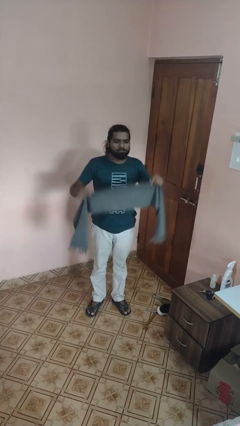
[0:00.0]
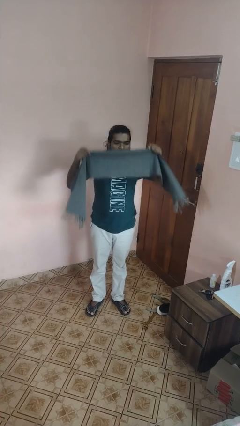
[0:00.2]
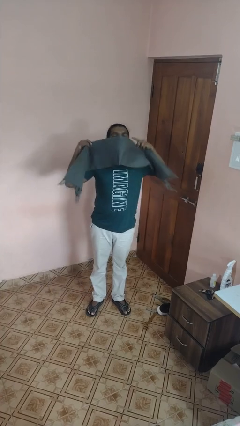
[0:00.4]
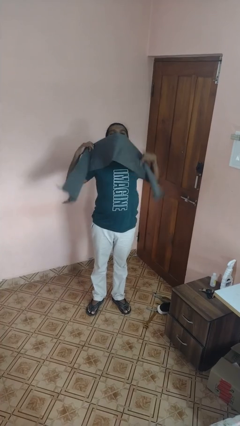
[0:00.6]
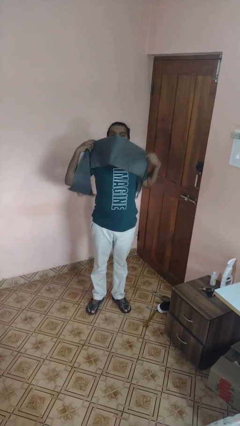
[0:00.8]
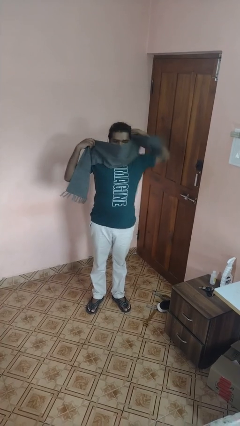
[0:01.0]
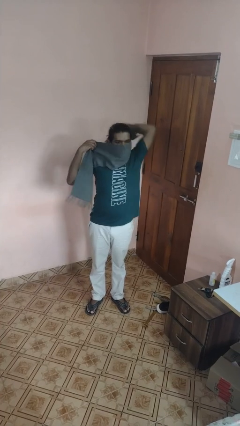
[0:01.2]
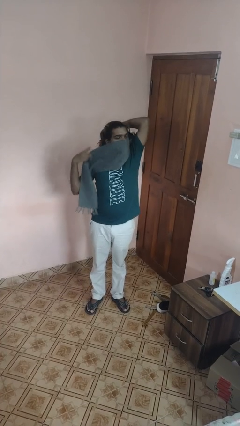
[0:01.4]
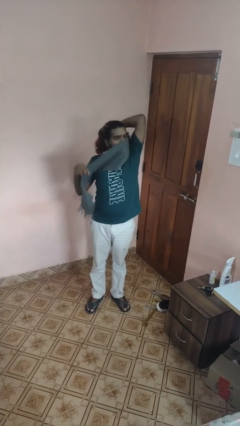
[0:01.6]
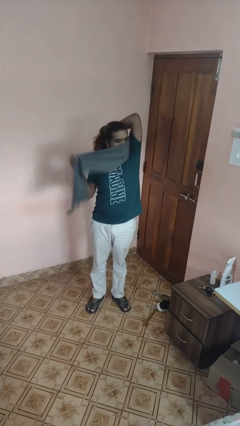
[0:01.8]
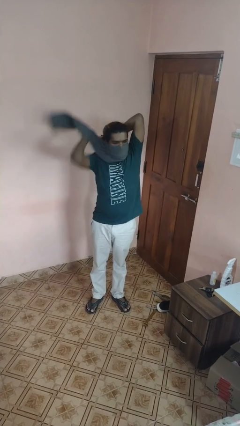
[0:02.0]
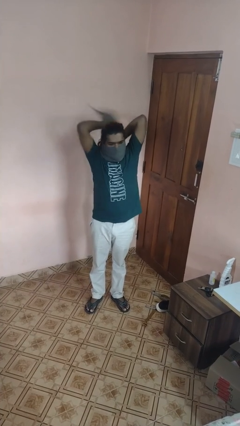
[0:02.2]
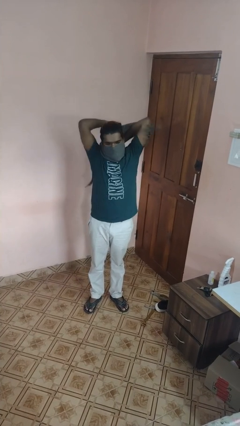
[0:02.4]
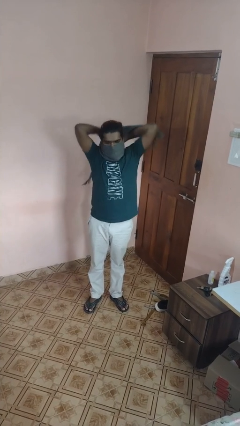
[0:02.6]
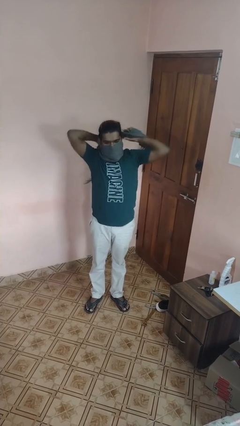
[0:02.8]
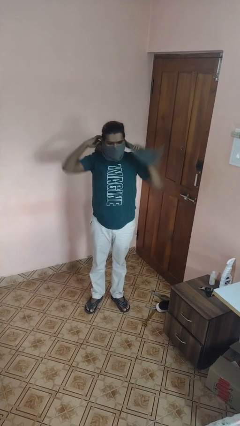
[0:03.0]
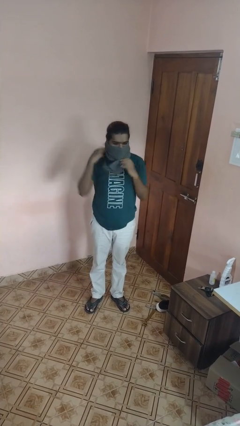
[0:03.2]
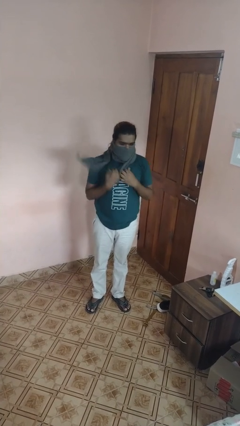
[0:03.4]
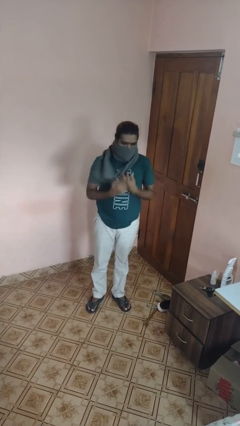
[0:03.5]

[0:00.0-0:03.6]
person puts on scarf

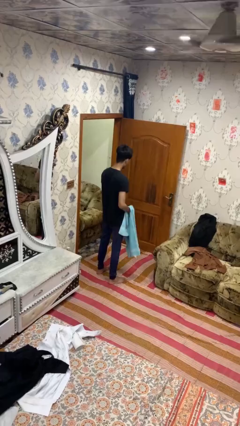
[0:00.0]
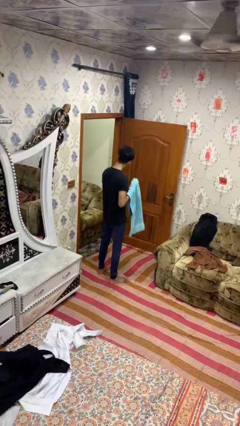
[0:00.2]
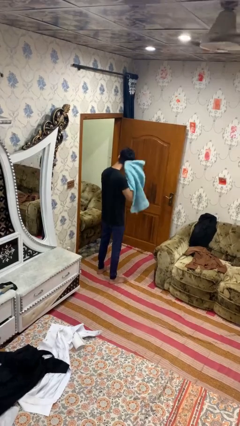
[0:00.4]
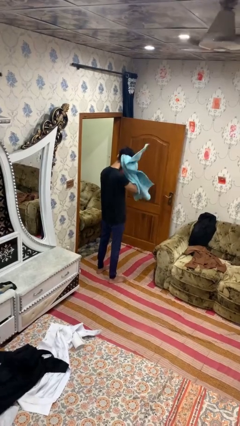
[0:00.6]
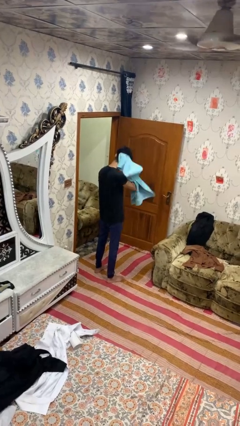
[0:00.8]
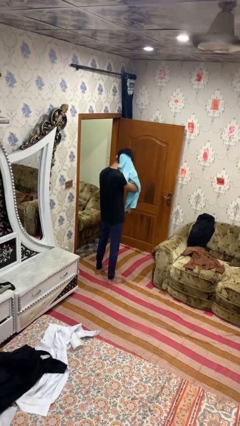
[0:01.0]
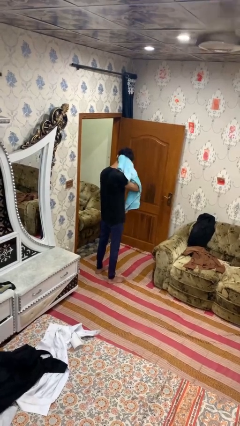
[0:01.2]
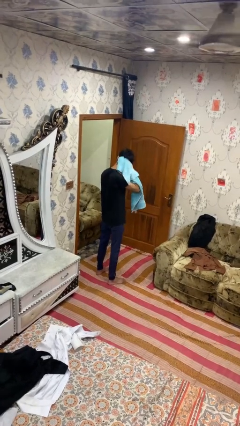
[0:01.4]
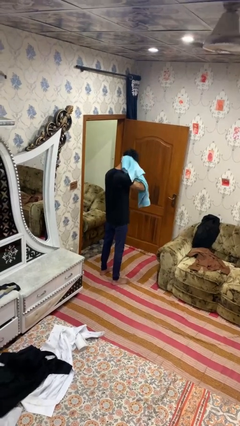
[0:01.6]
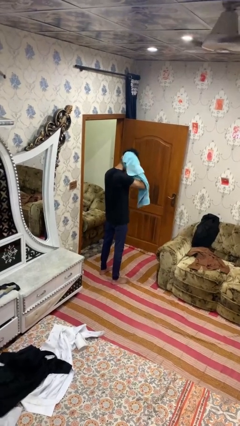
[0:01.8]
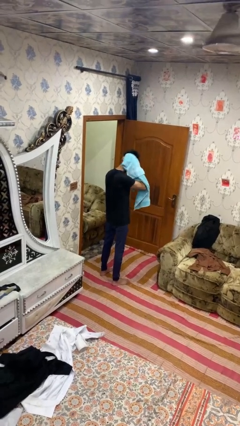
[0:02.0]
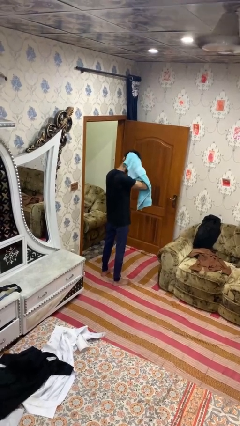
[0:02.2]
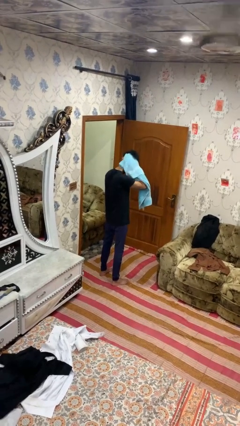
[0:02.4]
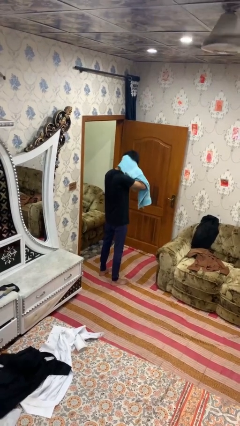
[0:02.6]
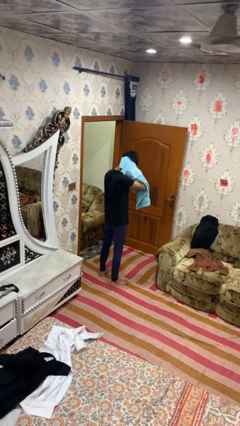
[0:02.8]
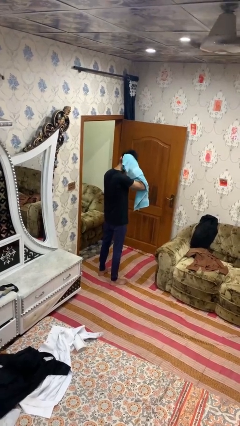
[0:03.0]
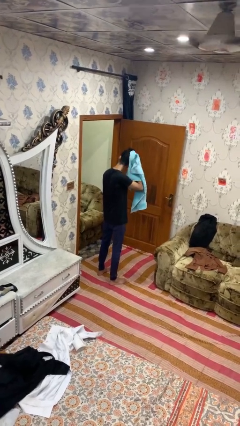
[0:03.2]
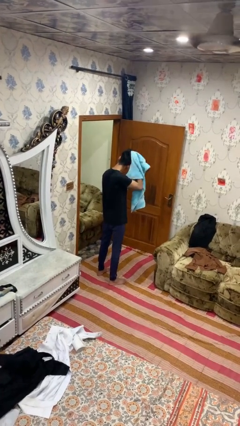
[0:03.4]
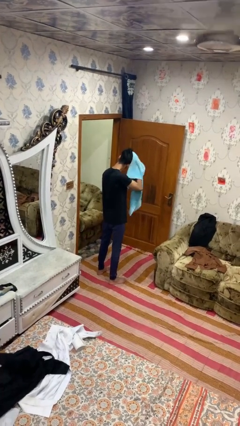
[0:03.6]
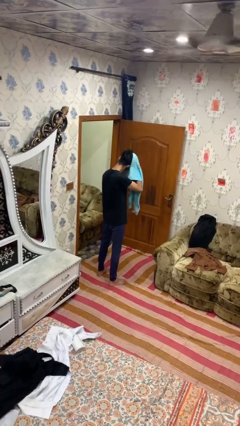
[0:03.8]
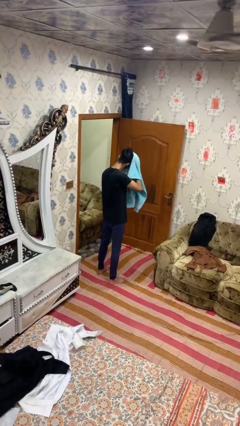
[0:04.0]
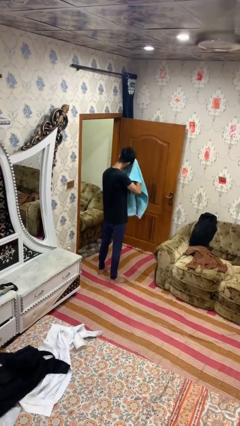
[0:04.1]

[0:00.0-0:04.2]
person dries hair with towel

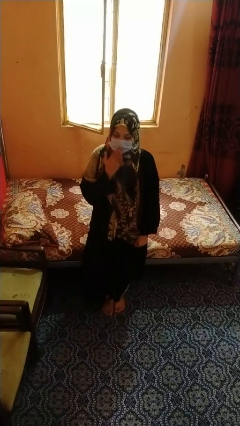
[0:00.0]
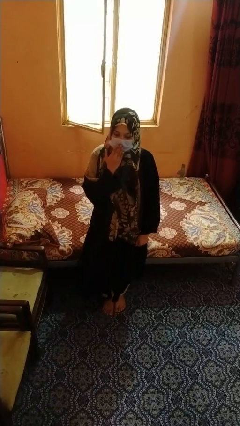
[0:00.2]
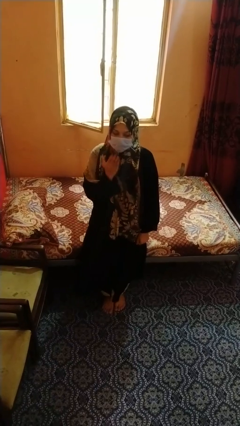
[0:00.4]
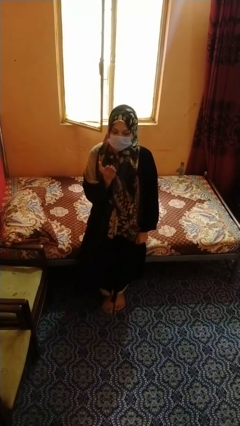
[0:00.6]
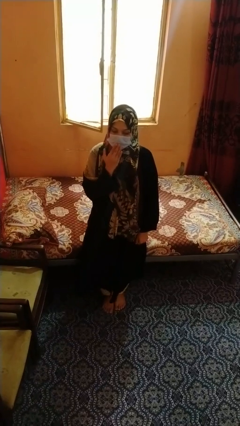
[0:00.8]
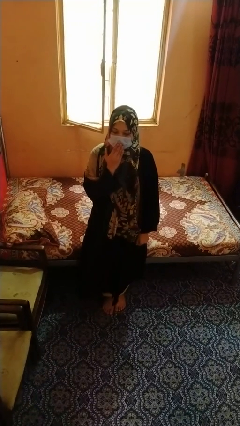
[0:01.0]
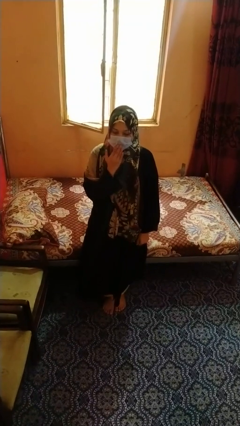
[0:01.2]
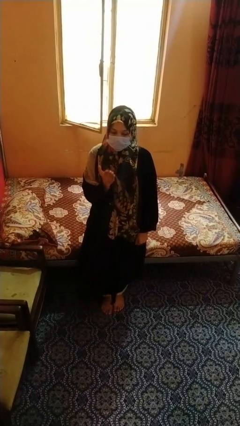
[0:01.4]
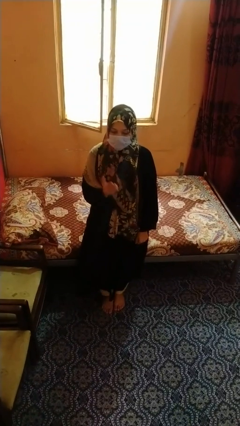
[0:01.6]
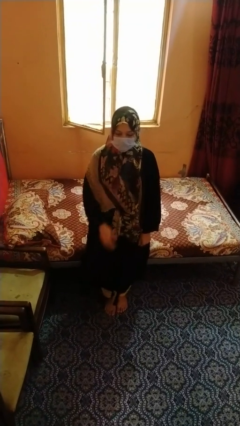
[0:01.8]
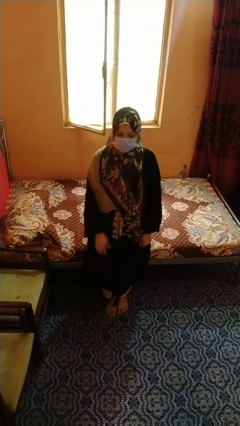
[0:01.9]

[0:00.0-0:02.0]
person gestures blow kiss

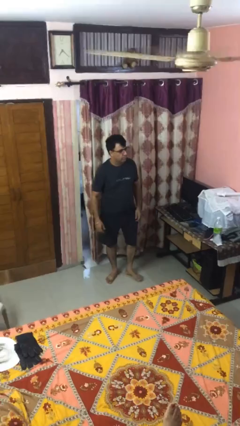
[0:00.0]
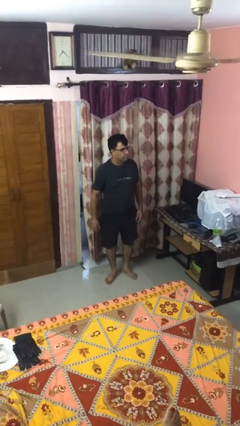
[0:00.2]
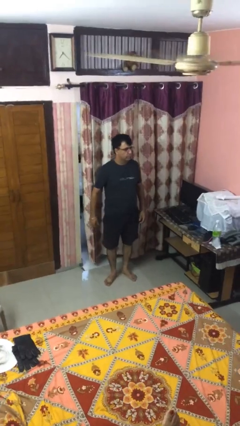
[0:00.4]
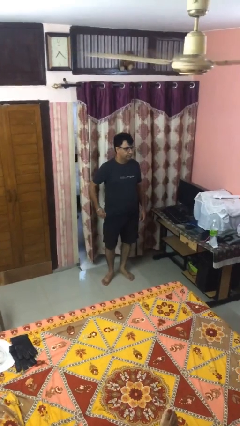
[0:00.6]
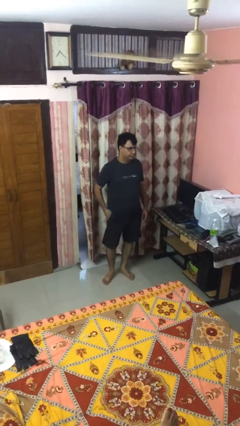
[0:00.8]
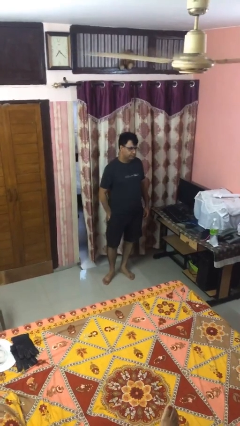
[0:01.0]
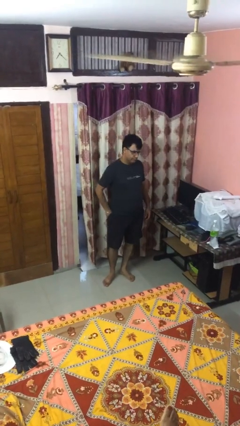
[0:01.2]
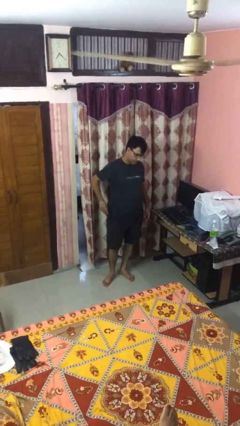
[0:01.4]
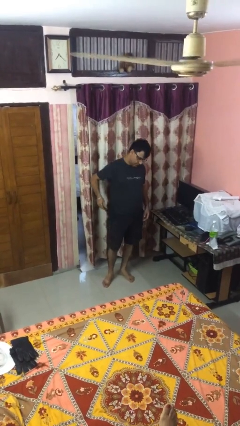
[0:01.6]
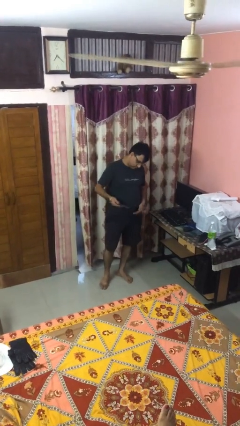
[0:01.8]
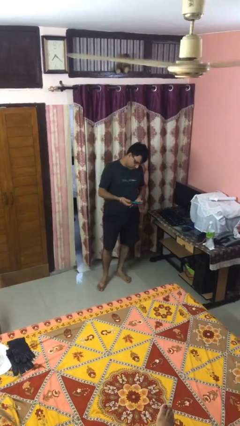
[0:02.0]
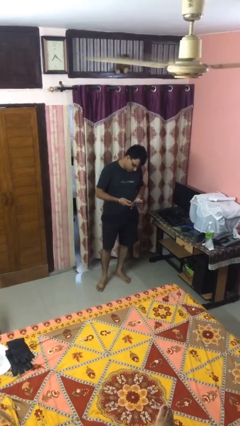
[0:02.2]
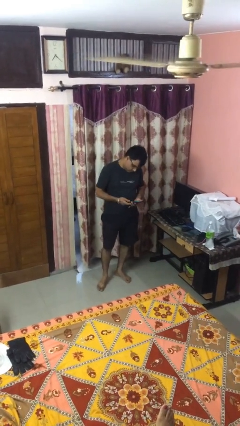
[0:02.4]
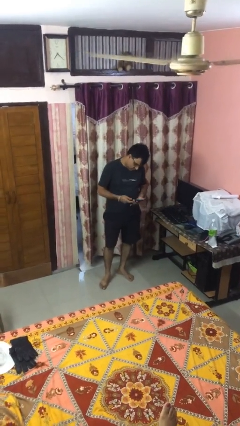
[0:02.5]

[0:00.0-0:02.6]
person takes phone from pocket

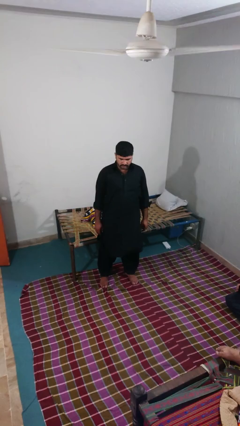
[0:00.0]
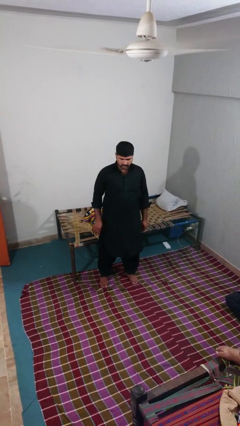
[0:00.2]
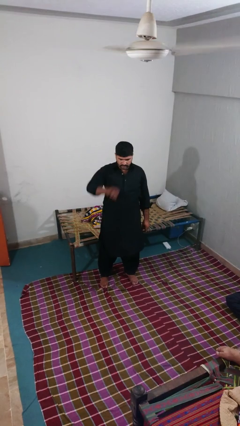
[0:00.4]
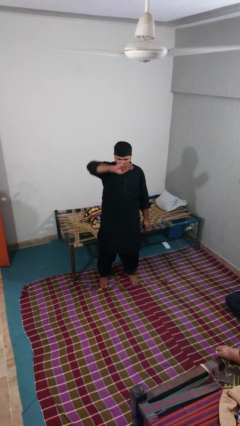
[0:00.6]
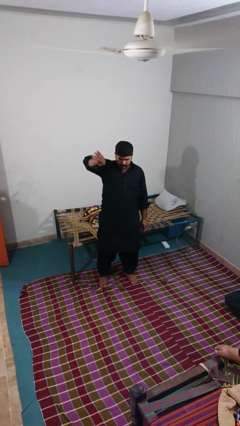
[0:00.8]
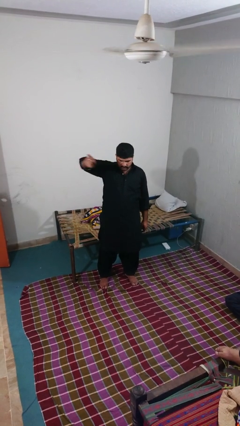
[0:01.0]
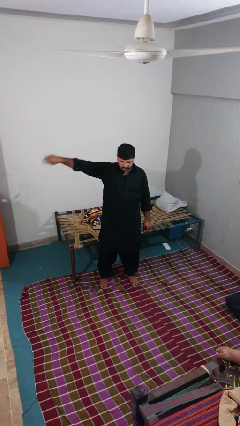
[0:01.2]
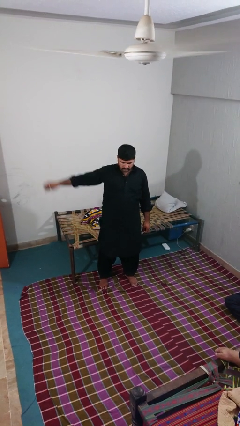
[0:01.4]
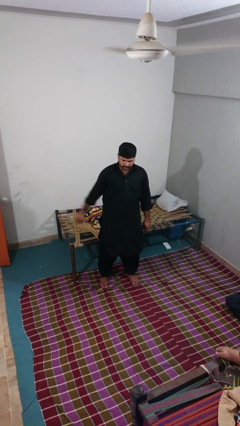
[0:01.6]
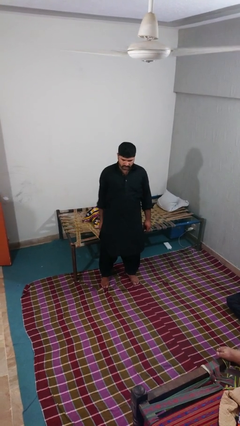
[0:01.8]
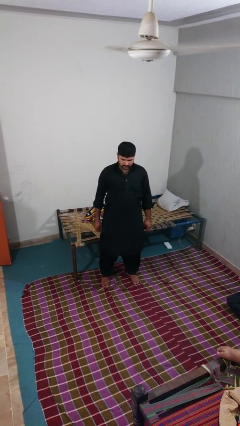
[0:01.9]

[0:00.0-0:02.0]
person gestures swipe right

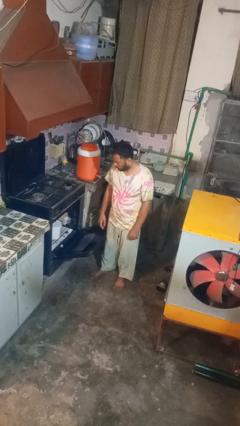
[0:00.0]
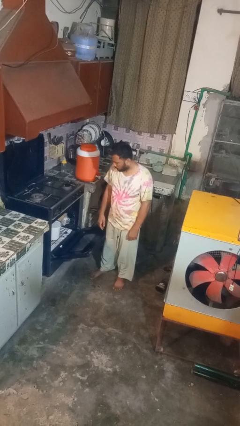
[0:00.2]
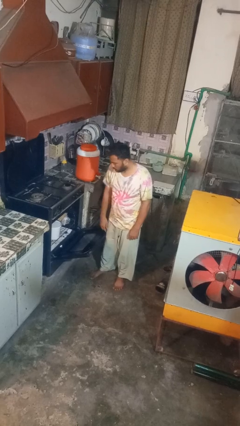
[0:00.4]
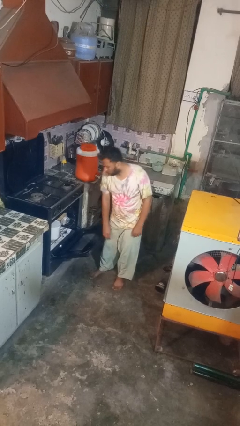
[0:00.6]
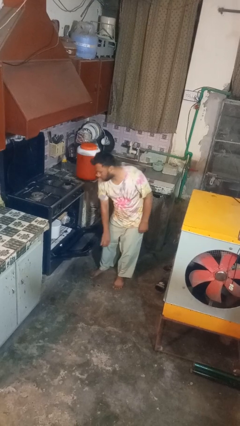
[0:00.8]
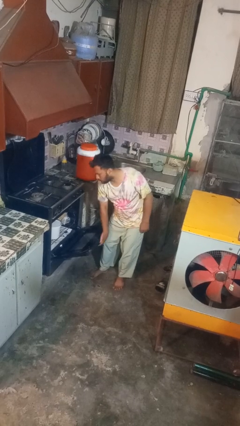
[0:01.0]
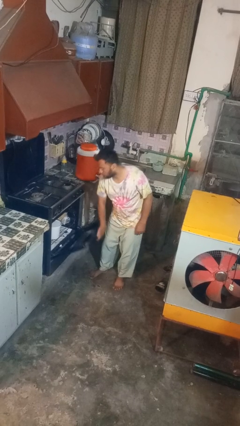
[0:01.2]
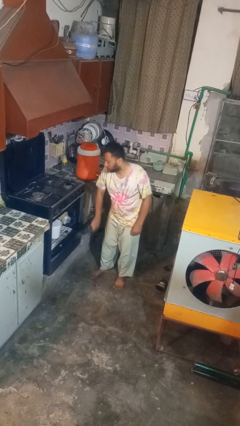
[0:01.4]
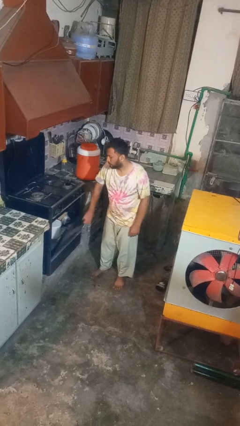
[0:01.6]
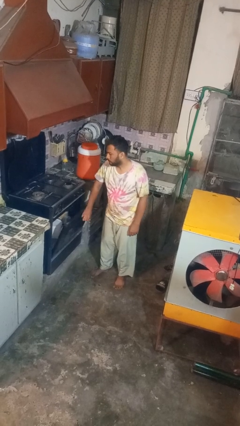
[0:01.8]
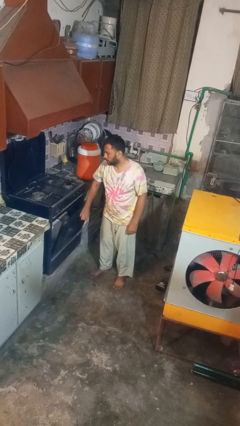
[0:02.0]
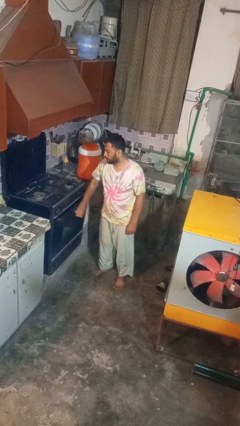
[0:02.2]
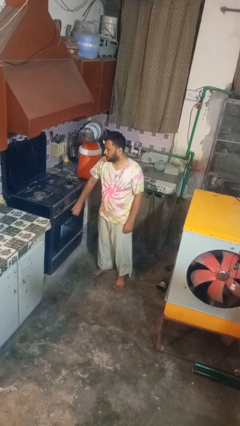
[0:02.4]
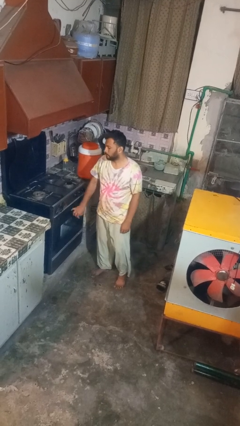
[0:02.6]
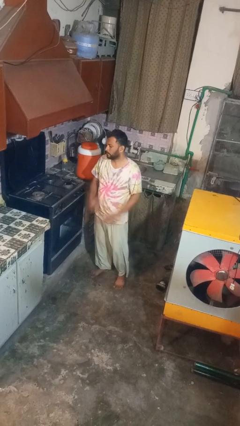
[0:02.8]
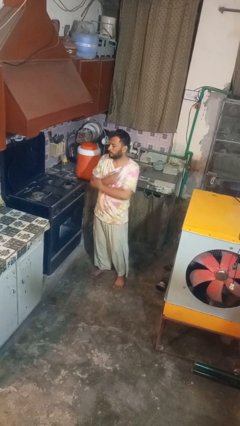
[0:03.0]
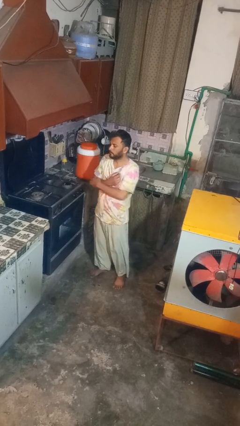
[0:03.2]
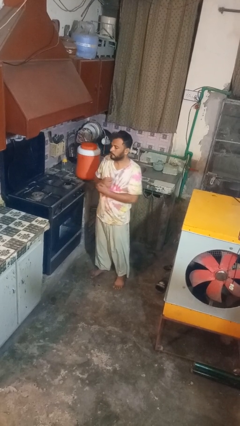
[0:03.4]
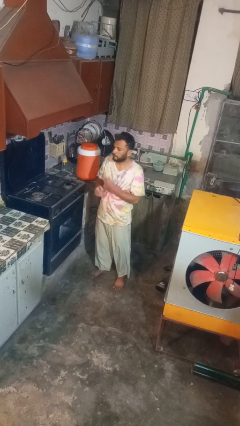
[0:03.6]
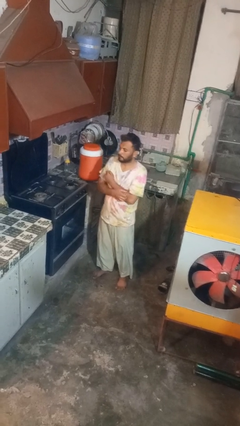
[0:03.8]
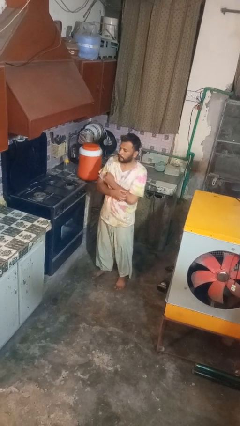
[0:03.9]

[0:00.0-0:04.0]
person closes oven door
